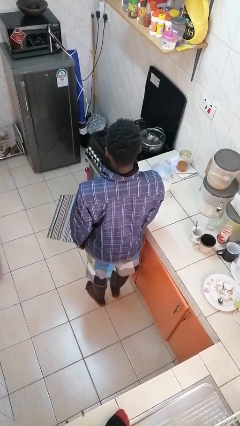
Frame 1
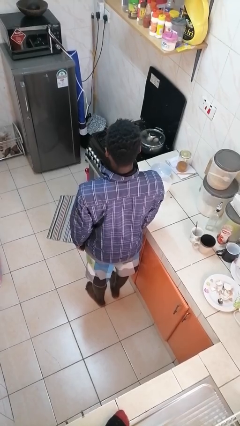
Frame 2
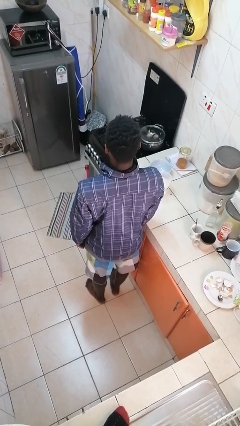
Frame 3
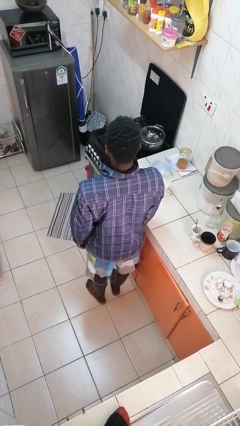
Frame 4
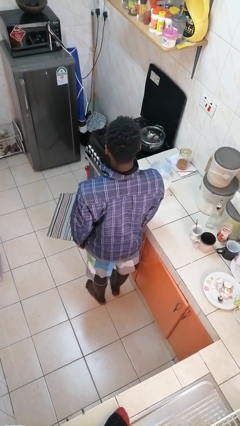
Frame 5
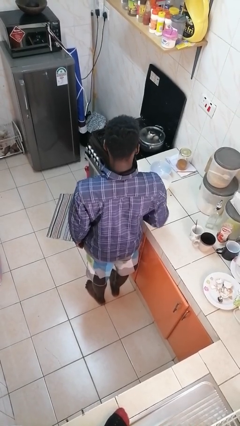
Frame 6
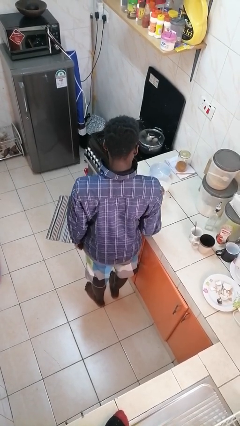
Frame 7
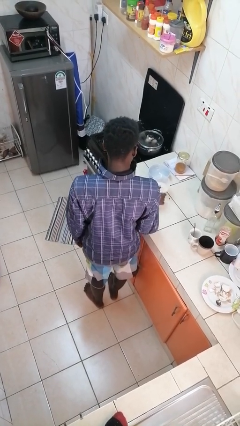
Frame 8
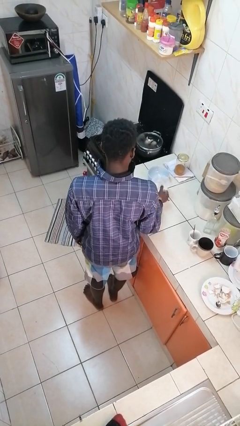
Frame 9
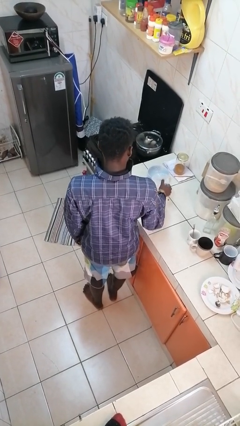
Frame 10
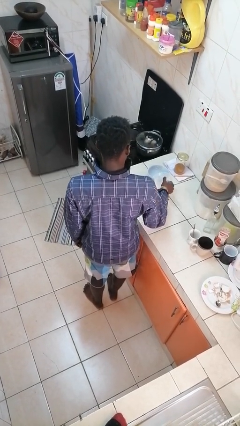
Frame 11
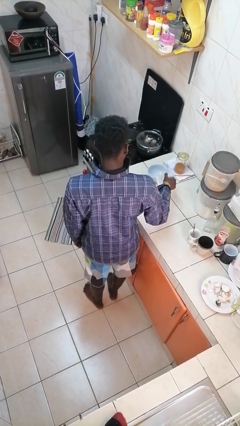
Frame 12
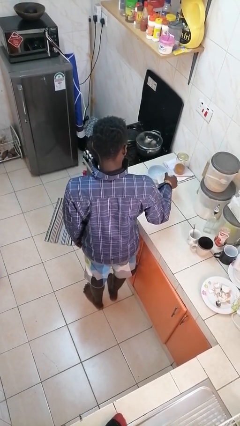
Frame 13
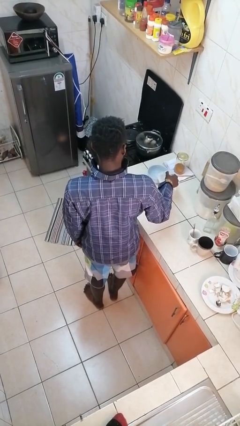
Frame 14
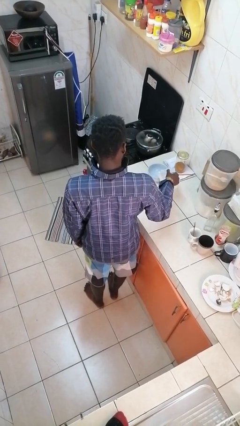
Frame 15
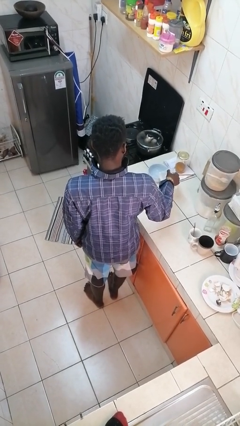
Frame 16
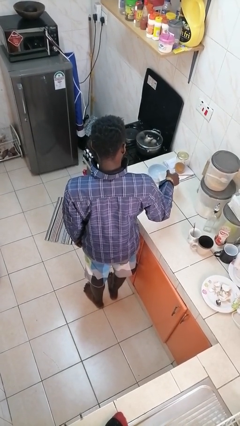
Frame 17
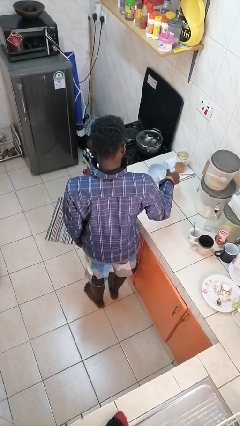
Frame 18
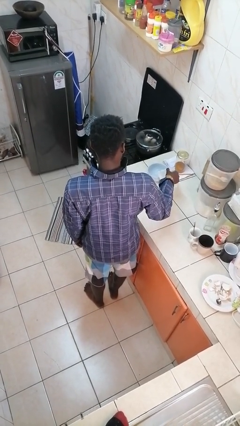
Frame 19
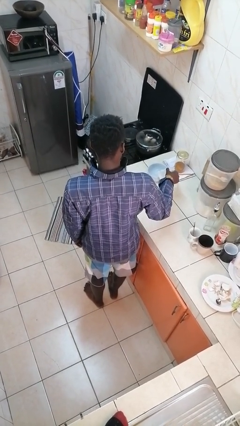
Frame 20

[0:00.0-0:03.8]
person pours into bowl

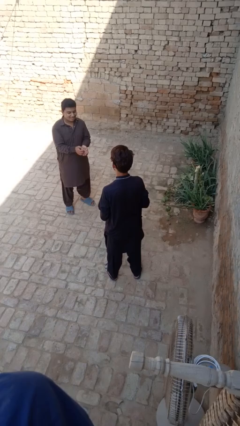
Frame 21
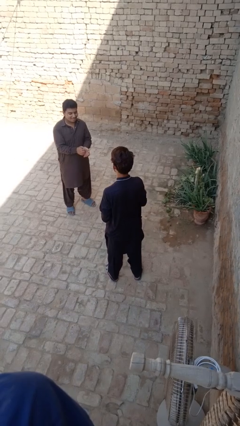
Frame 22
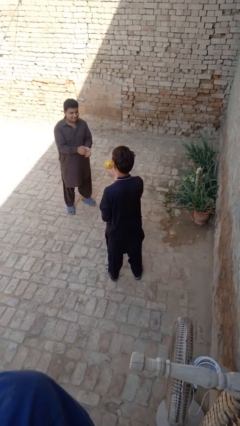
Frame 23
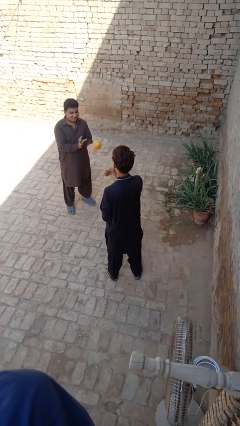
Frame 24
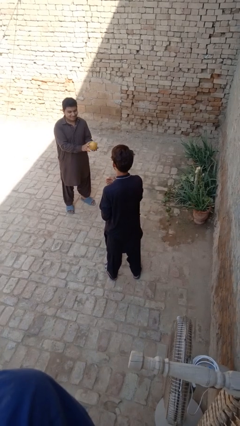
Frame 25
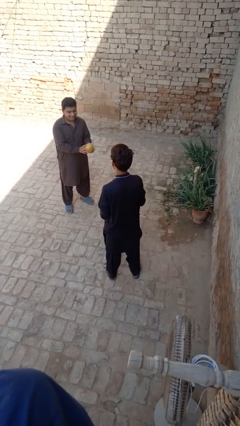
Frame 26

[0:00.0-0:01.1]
person throws object to person

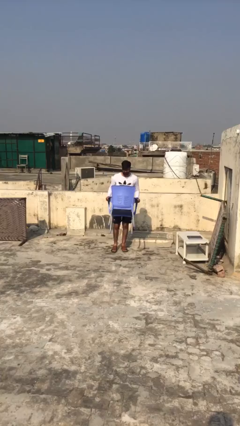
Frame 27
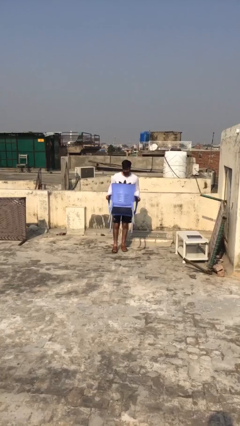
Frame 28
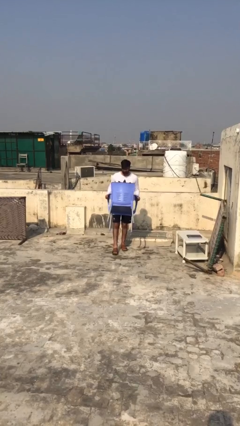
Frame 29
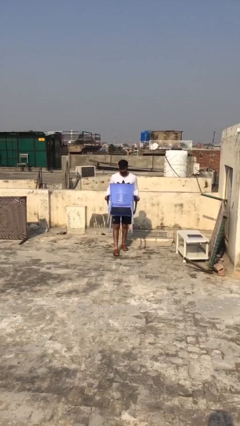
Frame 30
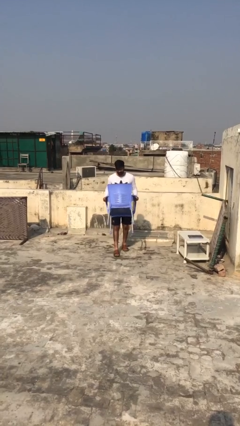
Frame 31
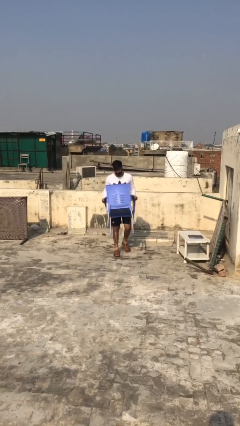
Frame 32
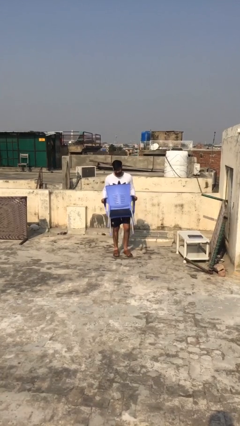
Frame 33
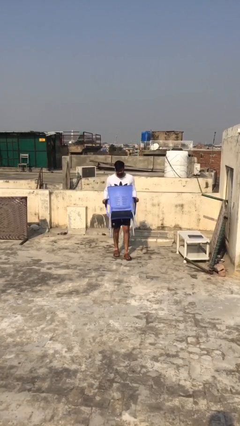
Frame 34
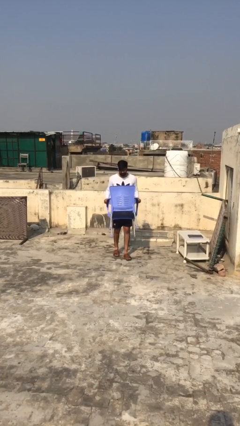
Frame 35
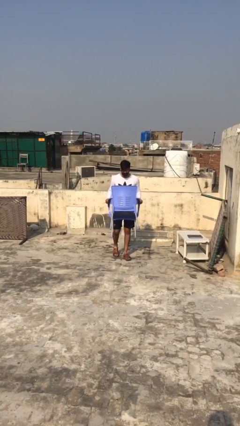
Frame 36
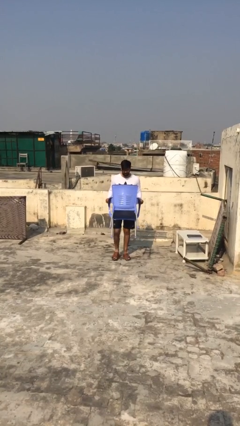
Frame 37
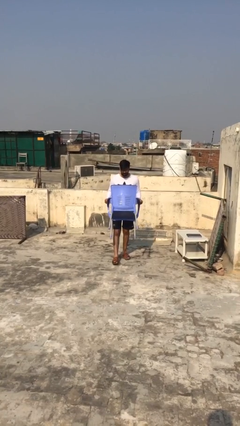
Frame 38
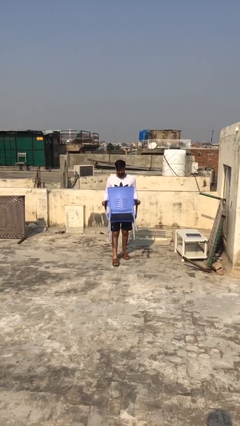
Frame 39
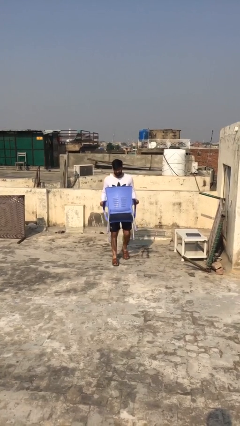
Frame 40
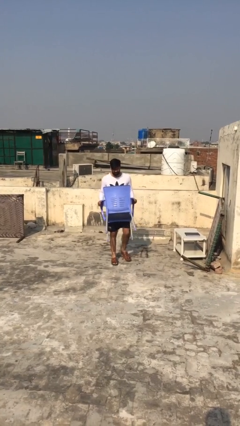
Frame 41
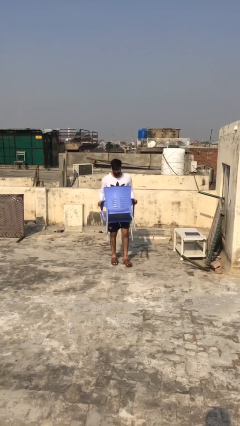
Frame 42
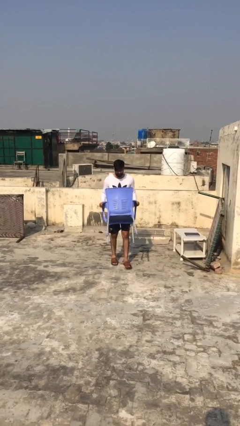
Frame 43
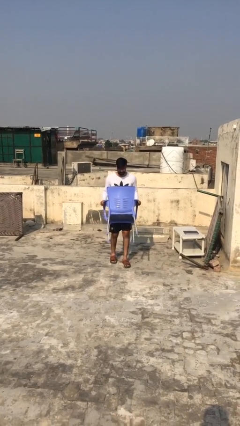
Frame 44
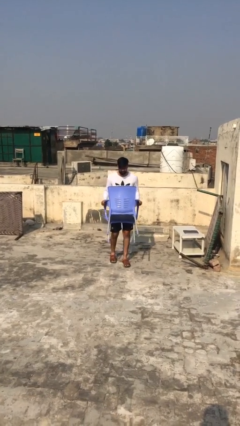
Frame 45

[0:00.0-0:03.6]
person carries heavy object

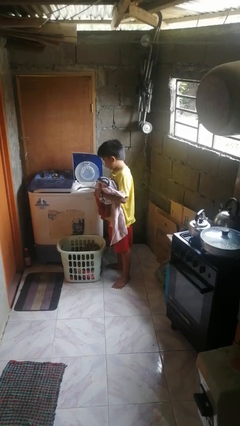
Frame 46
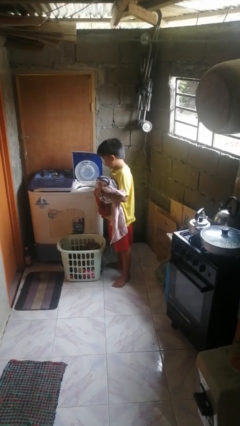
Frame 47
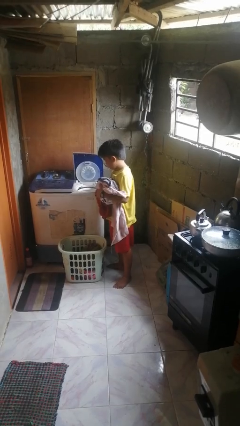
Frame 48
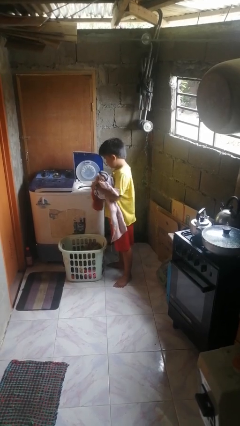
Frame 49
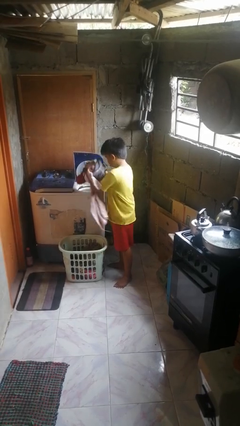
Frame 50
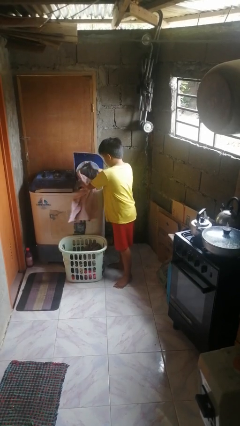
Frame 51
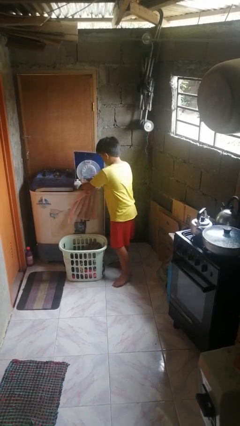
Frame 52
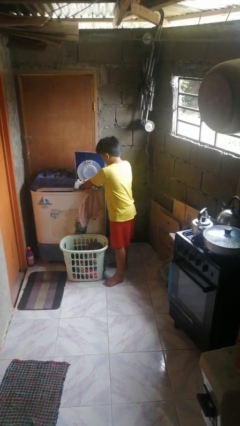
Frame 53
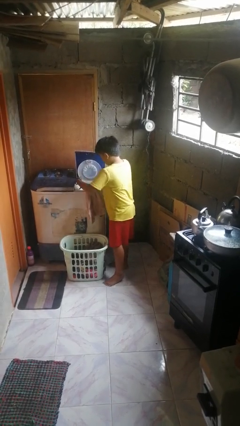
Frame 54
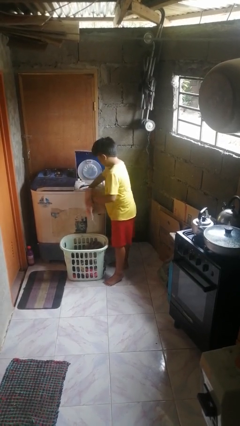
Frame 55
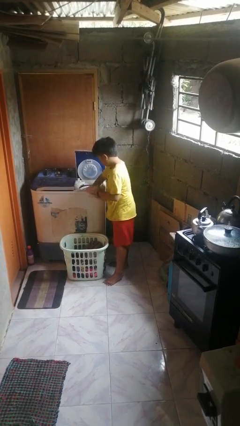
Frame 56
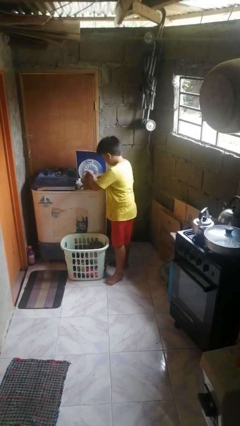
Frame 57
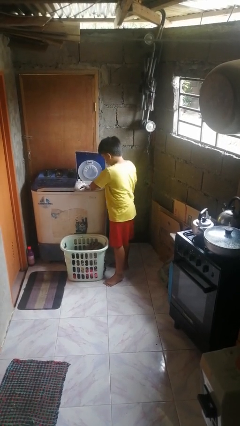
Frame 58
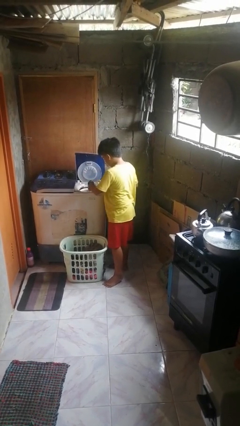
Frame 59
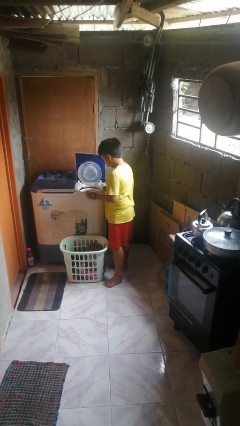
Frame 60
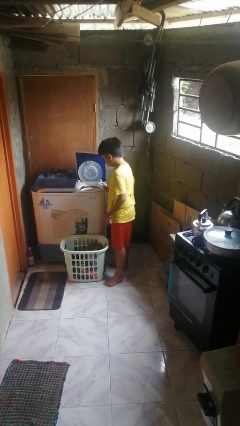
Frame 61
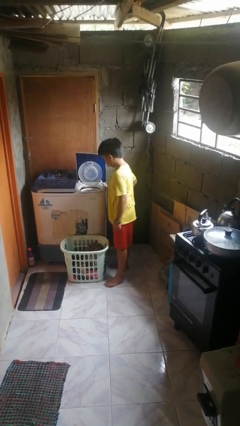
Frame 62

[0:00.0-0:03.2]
person loads dryer

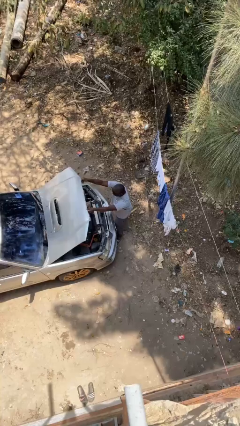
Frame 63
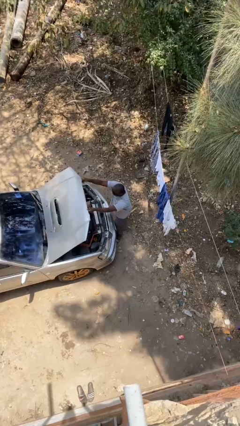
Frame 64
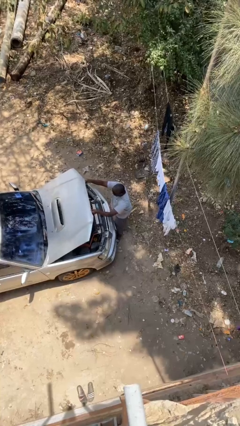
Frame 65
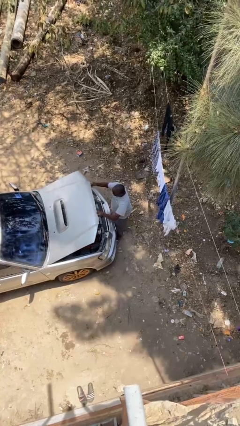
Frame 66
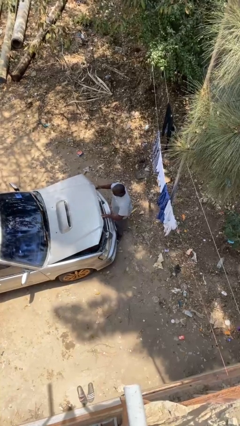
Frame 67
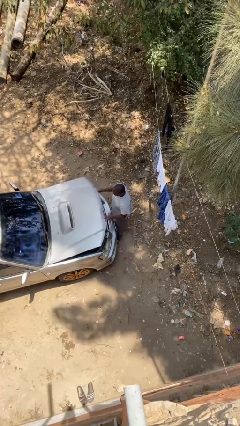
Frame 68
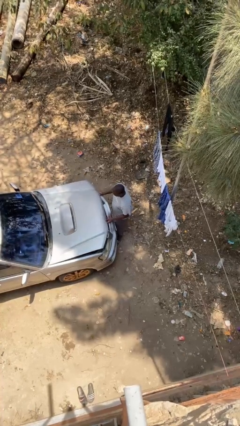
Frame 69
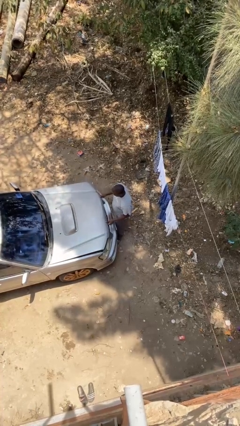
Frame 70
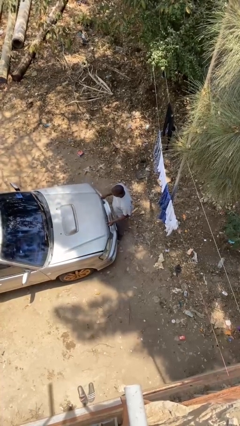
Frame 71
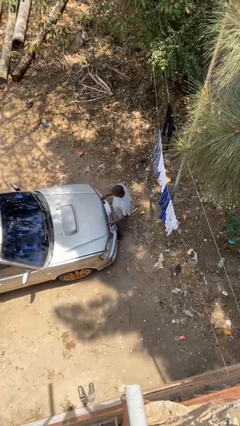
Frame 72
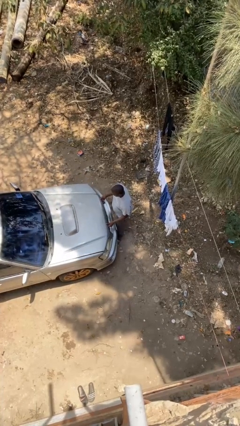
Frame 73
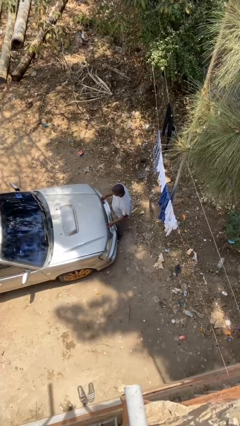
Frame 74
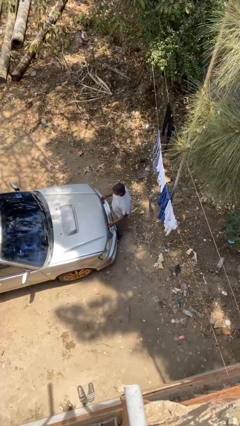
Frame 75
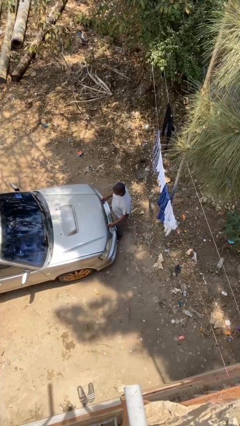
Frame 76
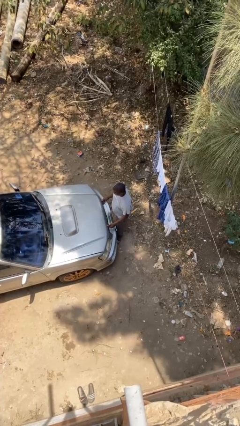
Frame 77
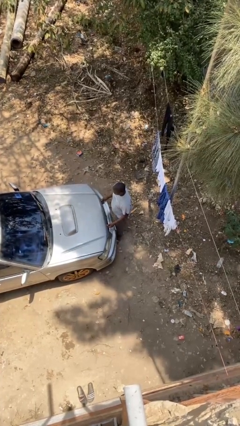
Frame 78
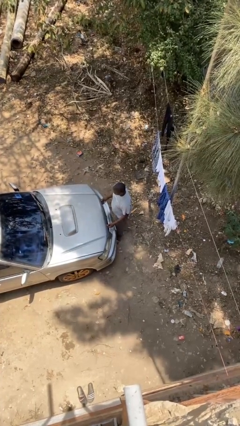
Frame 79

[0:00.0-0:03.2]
person closes car hood

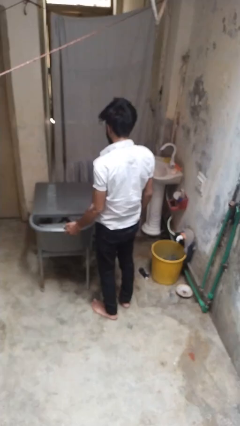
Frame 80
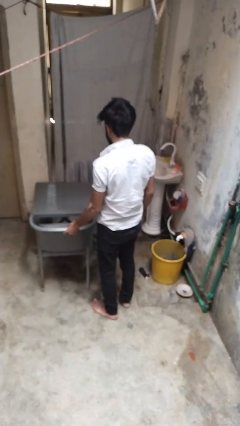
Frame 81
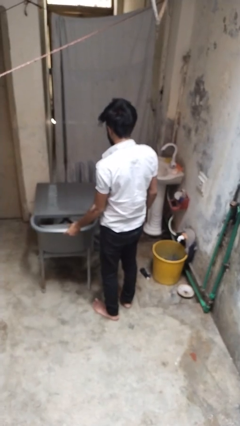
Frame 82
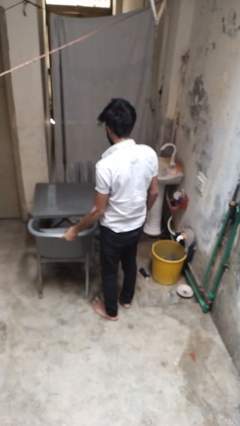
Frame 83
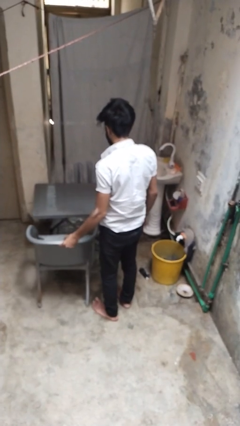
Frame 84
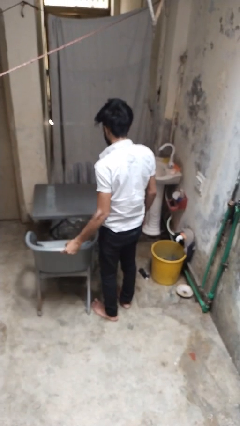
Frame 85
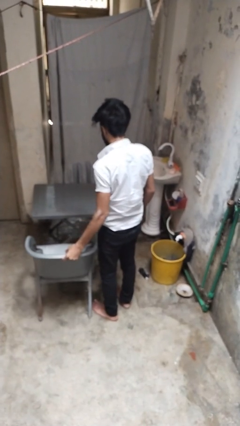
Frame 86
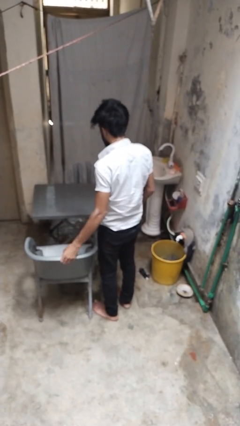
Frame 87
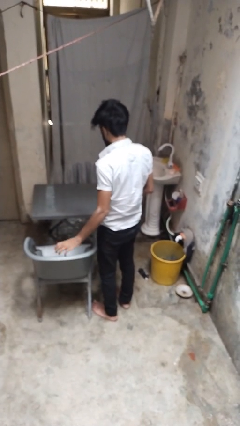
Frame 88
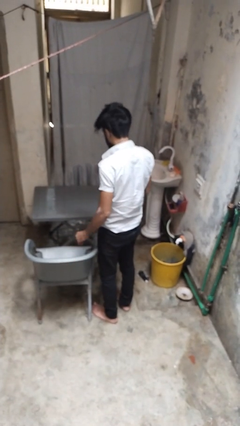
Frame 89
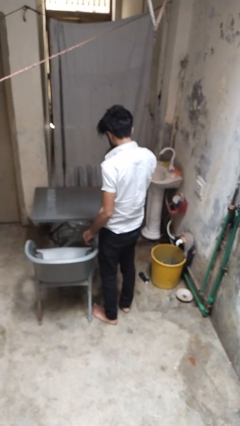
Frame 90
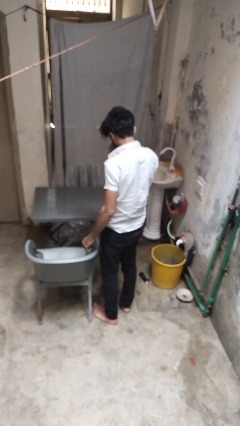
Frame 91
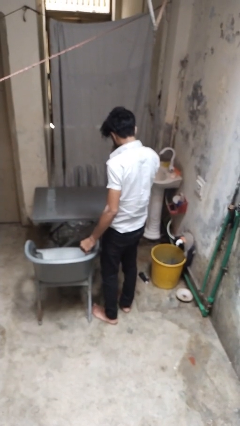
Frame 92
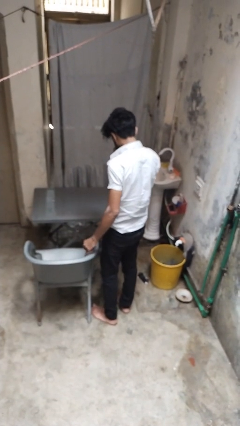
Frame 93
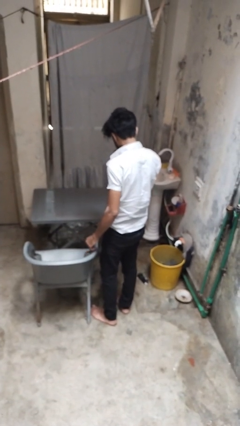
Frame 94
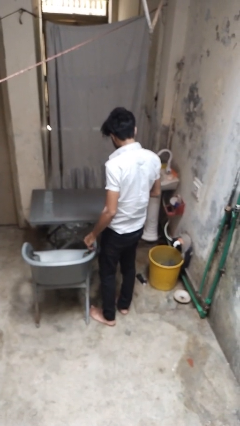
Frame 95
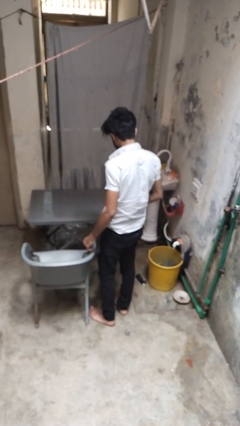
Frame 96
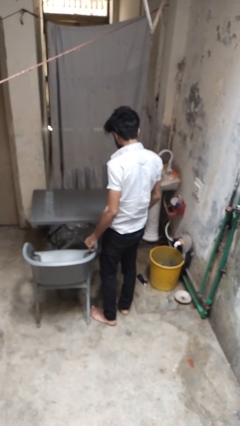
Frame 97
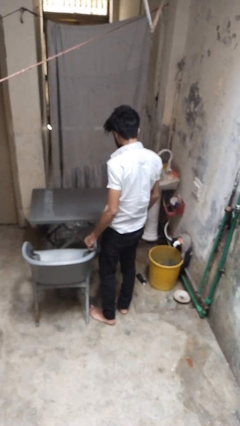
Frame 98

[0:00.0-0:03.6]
person pulls out chair
